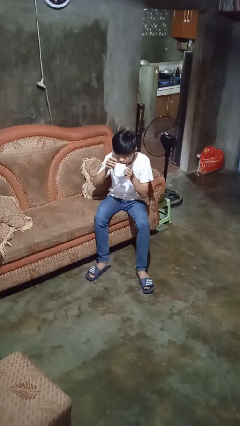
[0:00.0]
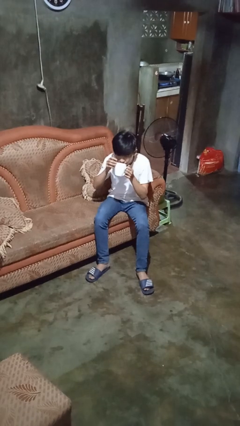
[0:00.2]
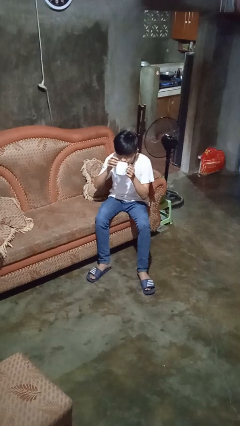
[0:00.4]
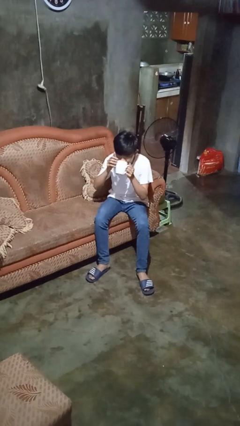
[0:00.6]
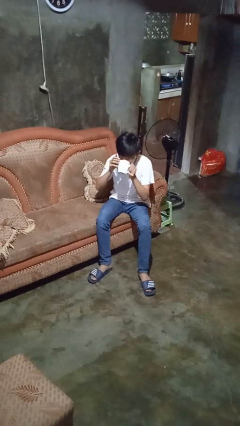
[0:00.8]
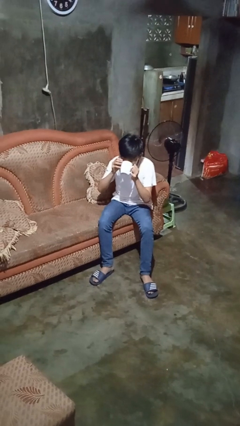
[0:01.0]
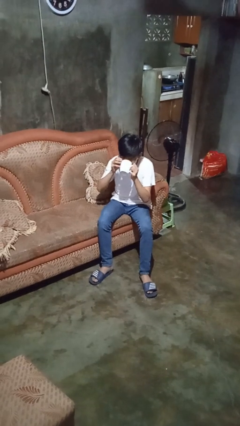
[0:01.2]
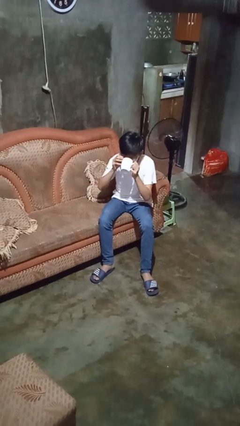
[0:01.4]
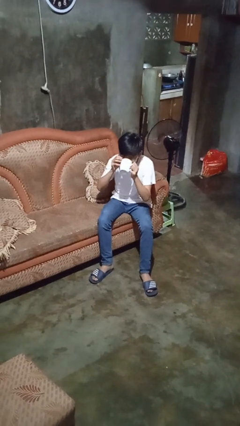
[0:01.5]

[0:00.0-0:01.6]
person drinks from mug

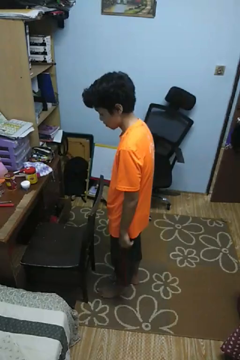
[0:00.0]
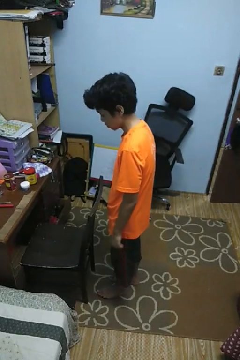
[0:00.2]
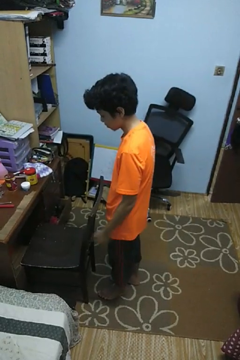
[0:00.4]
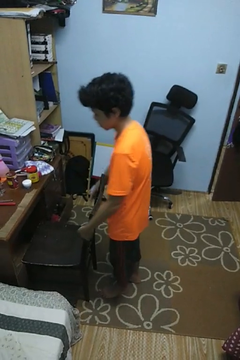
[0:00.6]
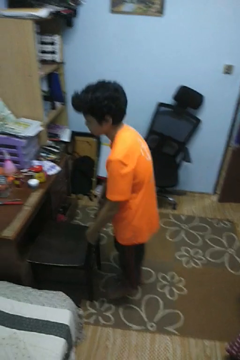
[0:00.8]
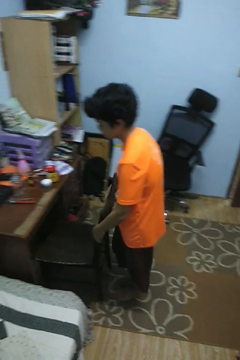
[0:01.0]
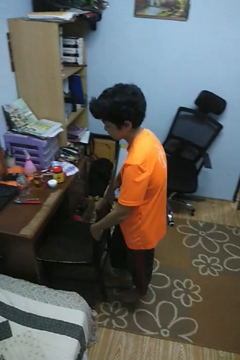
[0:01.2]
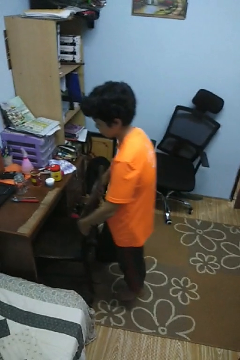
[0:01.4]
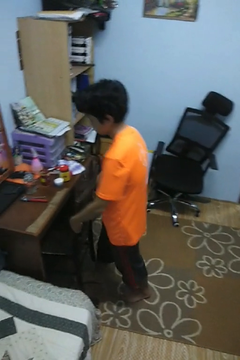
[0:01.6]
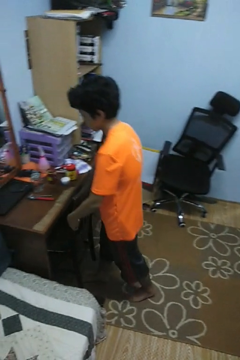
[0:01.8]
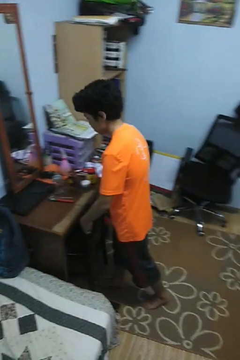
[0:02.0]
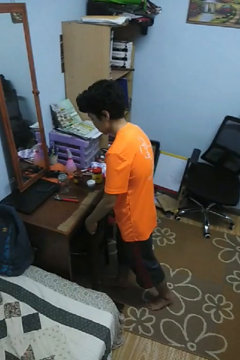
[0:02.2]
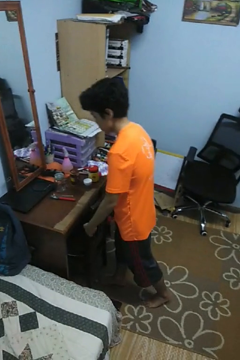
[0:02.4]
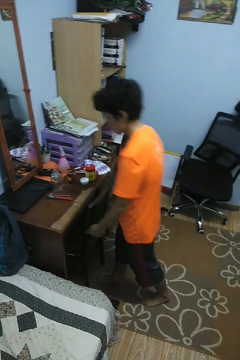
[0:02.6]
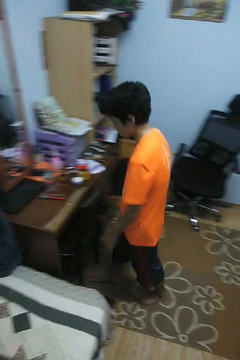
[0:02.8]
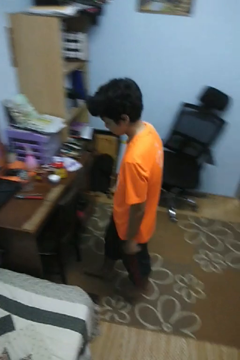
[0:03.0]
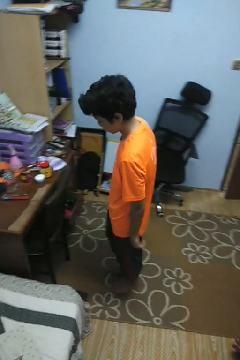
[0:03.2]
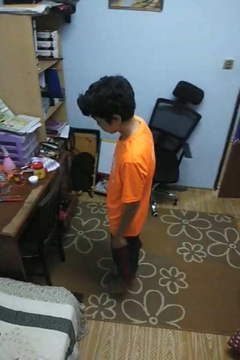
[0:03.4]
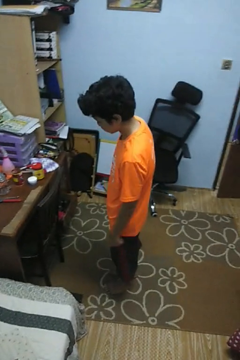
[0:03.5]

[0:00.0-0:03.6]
person pushes in chair

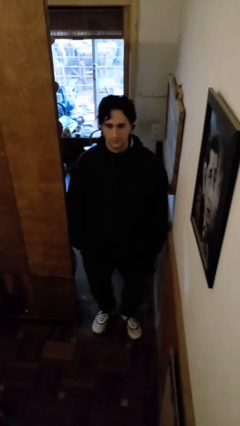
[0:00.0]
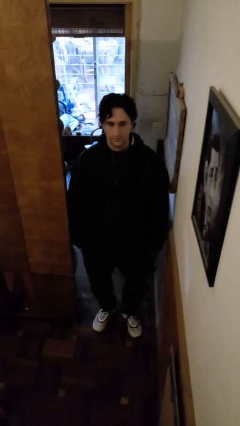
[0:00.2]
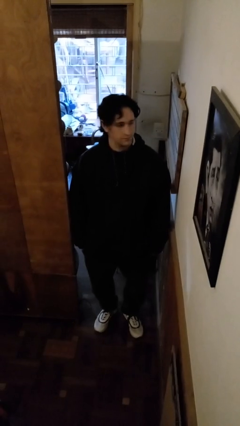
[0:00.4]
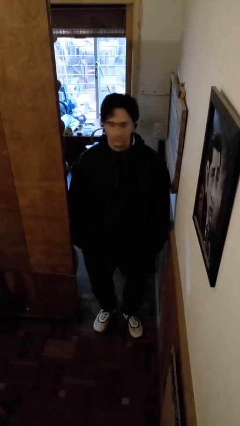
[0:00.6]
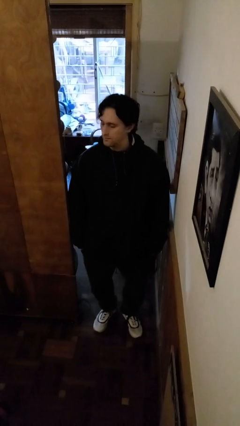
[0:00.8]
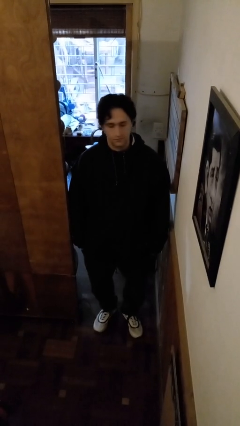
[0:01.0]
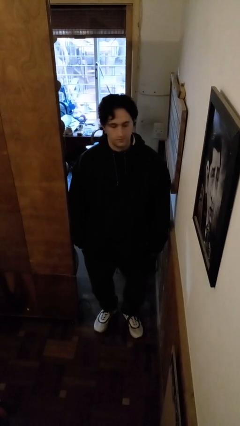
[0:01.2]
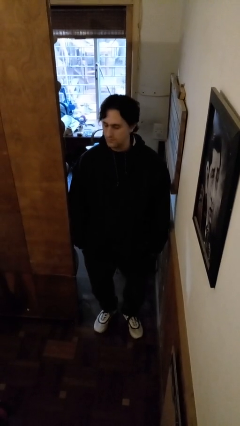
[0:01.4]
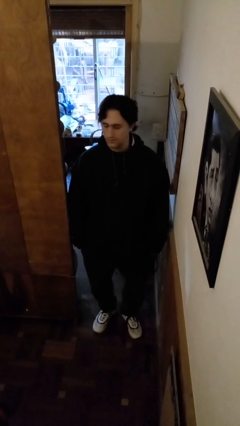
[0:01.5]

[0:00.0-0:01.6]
person shakes head

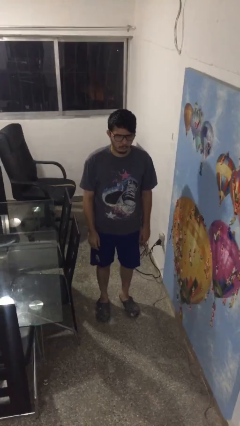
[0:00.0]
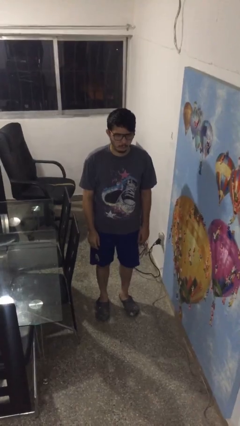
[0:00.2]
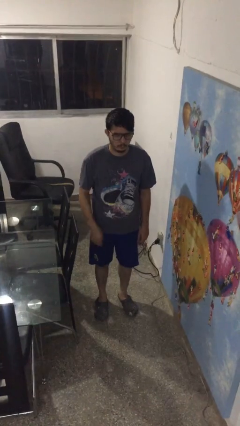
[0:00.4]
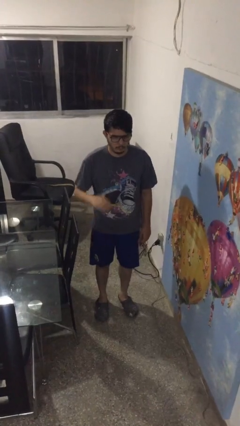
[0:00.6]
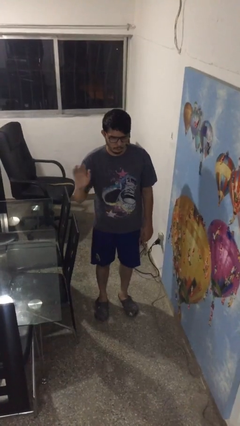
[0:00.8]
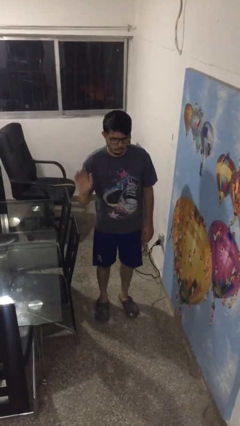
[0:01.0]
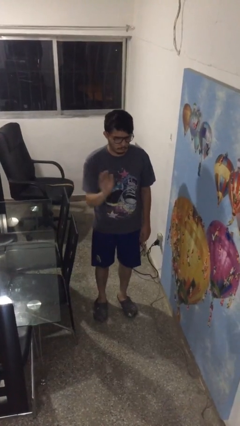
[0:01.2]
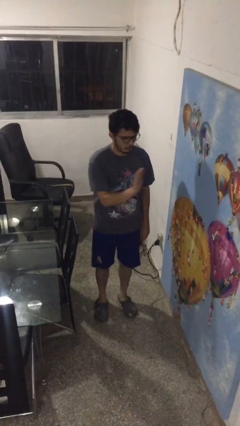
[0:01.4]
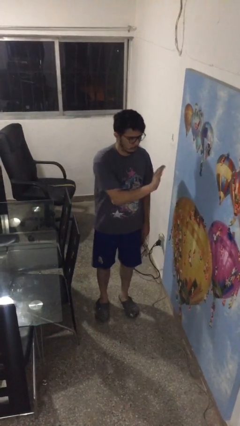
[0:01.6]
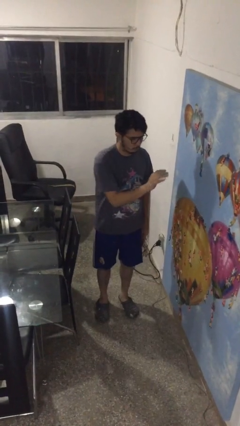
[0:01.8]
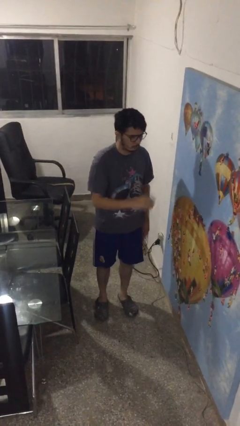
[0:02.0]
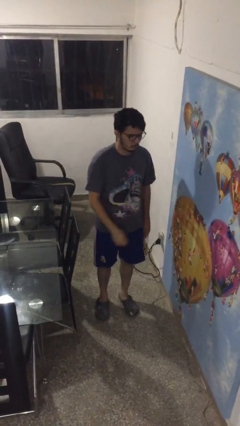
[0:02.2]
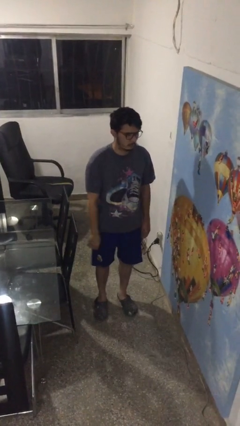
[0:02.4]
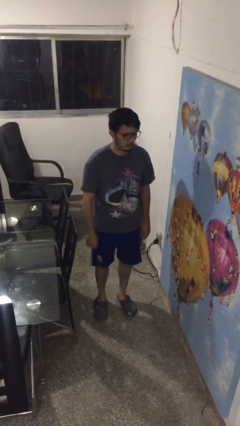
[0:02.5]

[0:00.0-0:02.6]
person gestures swipe left

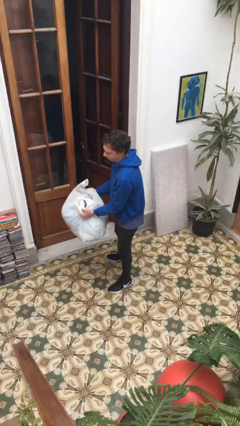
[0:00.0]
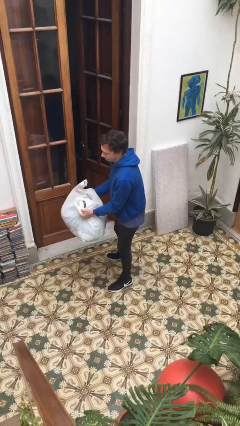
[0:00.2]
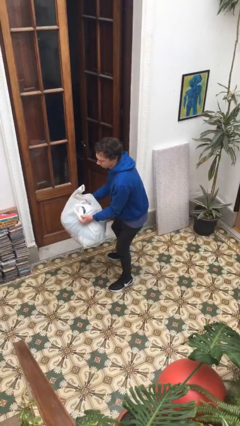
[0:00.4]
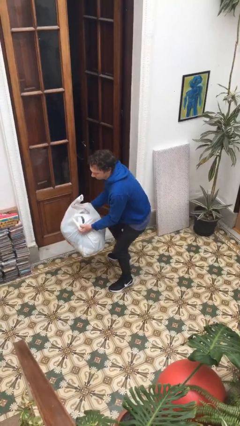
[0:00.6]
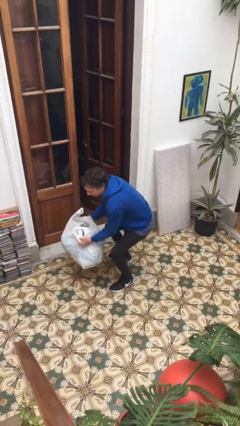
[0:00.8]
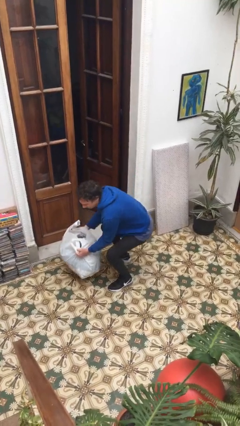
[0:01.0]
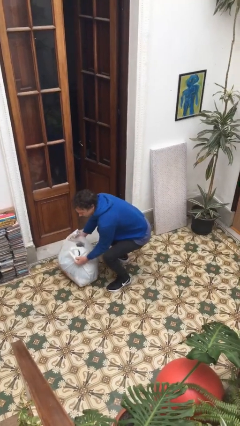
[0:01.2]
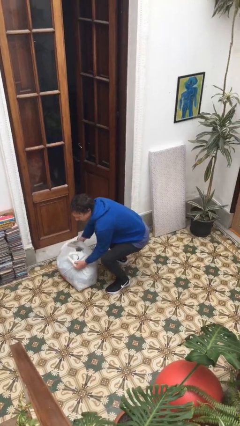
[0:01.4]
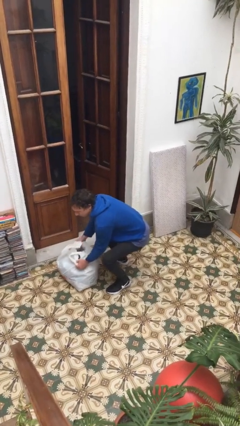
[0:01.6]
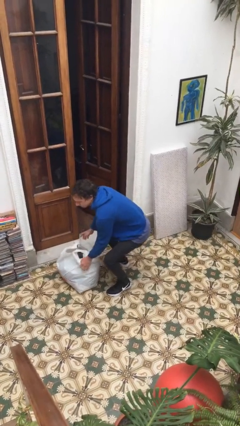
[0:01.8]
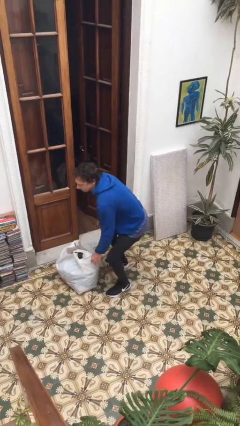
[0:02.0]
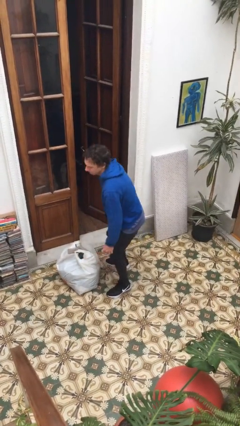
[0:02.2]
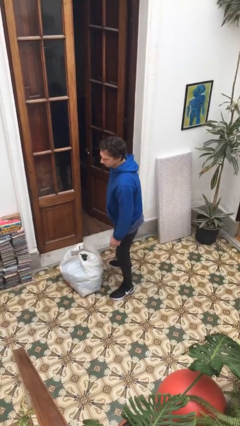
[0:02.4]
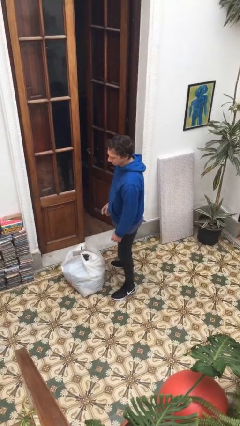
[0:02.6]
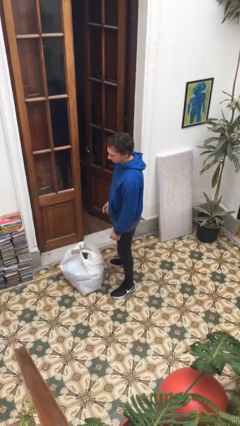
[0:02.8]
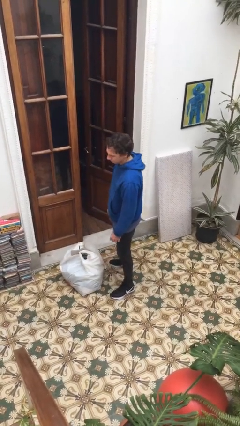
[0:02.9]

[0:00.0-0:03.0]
person puts down object on floor

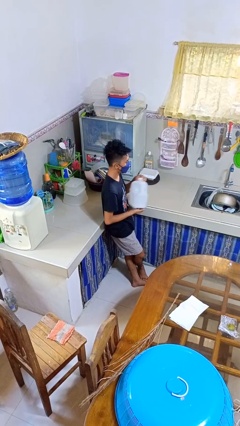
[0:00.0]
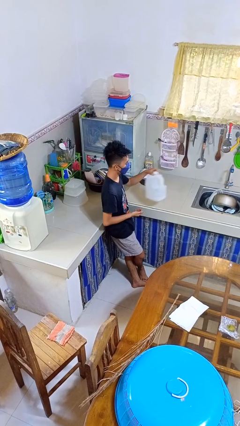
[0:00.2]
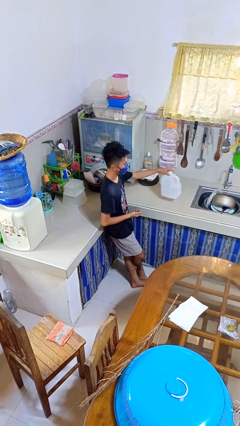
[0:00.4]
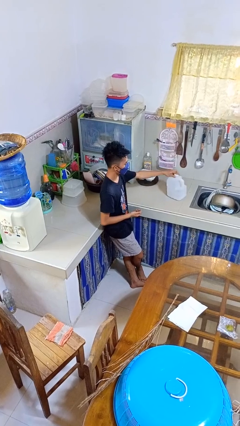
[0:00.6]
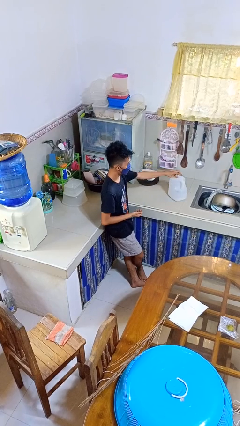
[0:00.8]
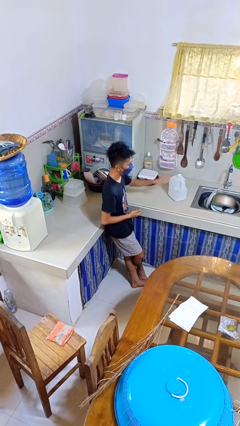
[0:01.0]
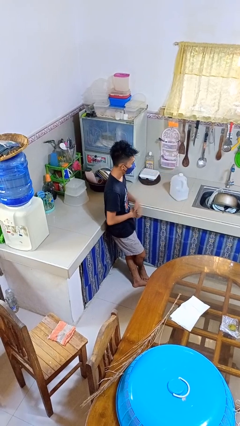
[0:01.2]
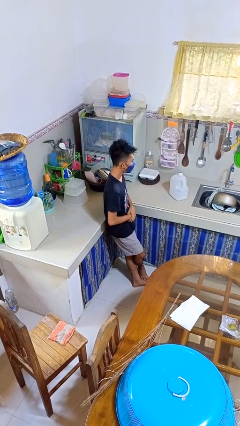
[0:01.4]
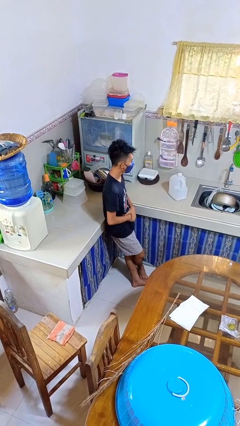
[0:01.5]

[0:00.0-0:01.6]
person puts down object on countertop

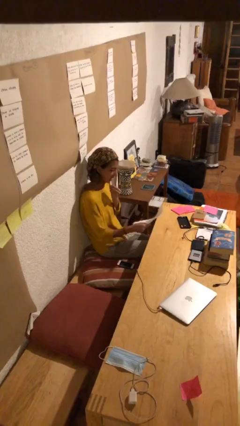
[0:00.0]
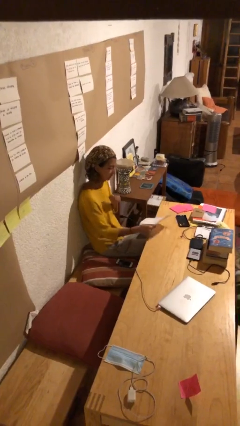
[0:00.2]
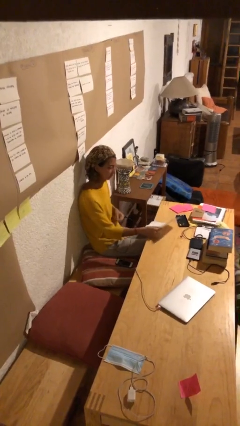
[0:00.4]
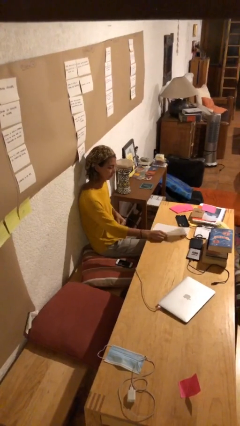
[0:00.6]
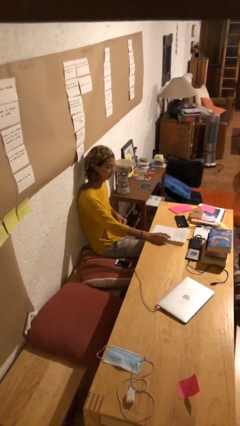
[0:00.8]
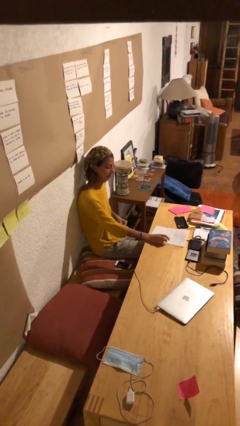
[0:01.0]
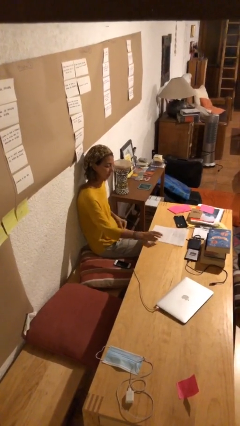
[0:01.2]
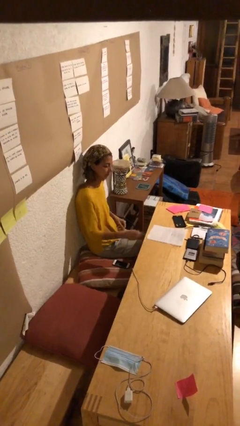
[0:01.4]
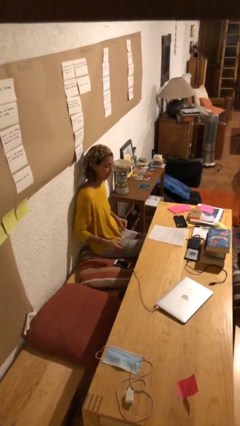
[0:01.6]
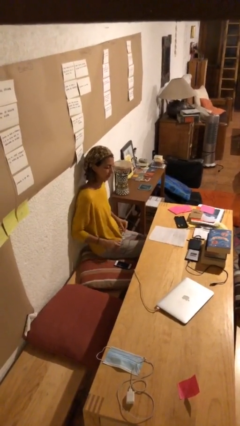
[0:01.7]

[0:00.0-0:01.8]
person puts down object on table

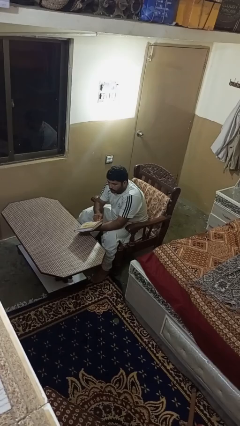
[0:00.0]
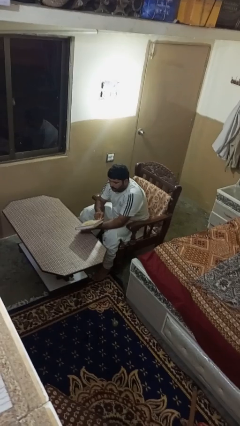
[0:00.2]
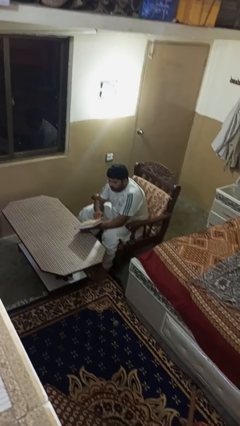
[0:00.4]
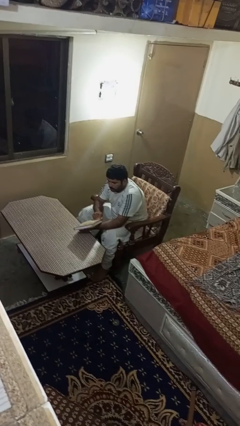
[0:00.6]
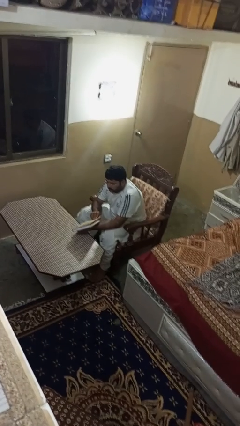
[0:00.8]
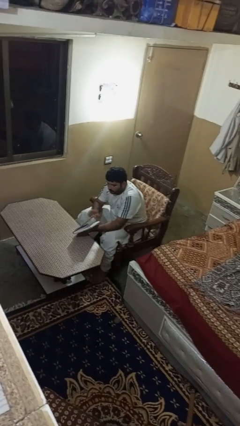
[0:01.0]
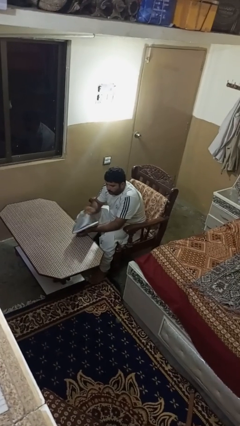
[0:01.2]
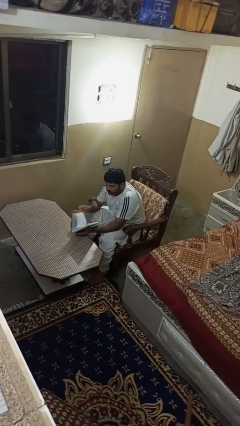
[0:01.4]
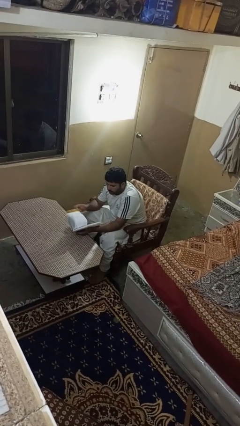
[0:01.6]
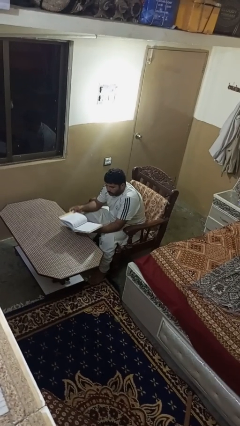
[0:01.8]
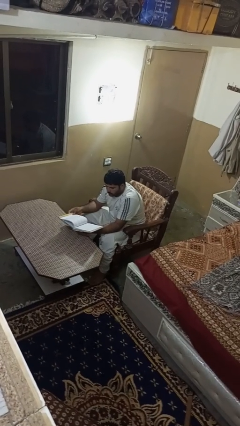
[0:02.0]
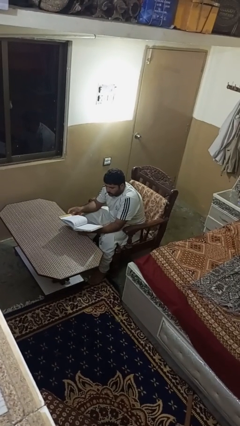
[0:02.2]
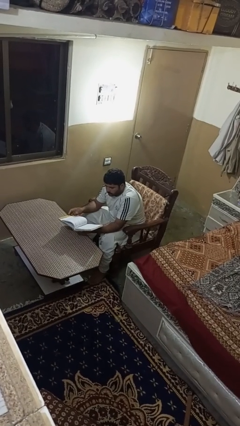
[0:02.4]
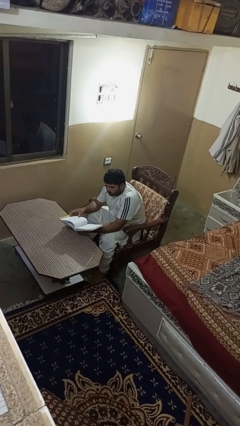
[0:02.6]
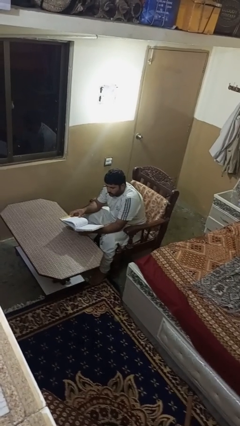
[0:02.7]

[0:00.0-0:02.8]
person reads book
